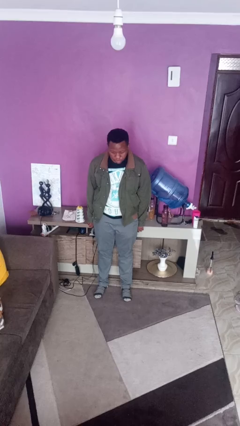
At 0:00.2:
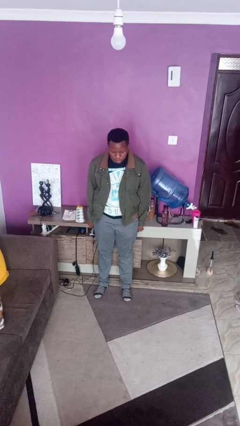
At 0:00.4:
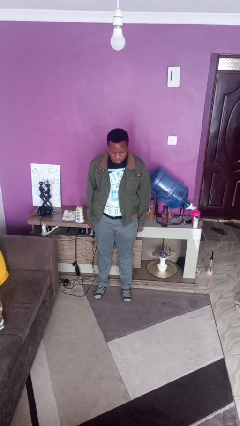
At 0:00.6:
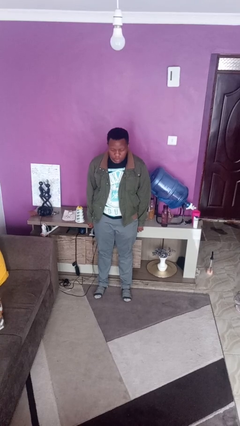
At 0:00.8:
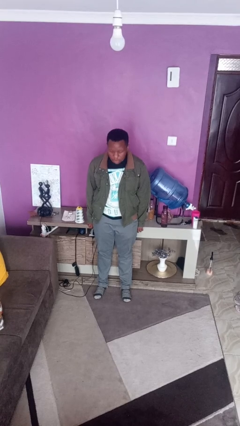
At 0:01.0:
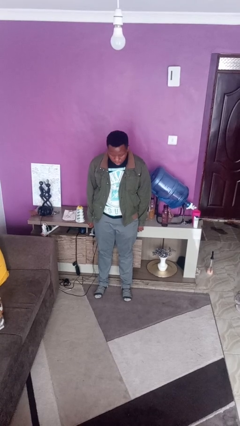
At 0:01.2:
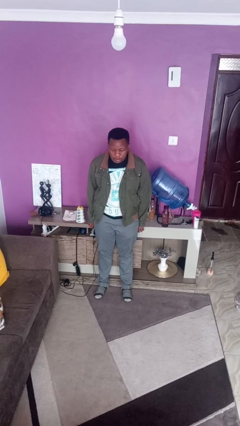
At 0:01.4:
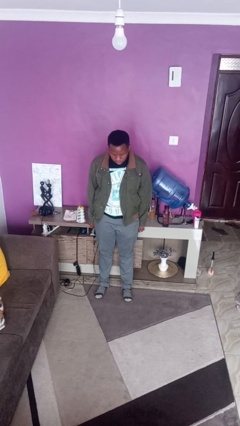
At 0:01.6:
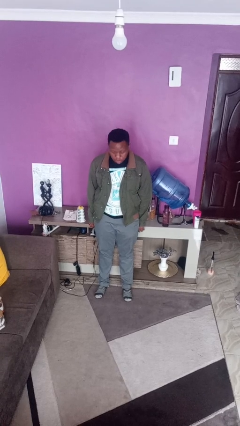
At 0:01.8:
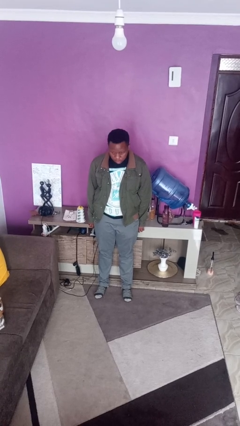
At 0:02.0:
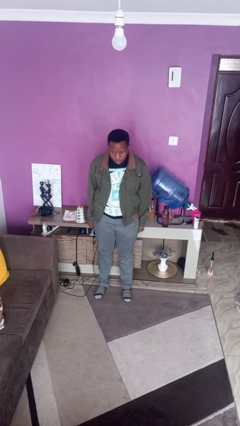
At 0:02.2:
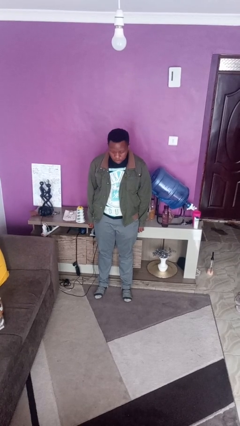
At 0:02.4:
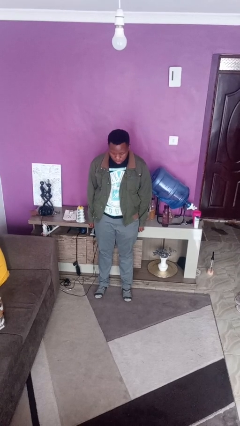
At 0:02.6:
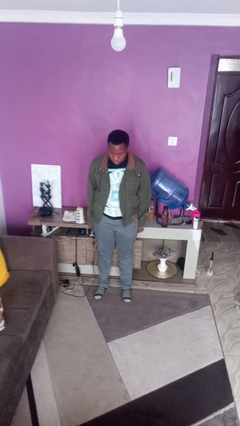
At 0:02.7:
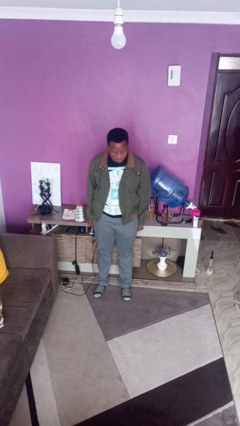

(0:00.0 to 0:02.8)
person nods head

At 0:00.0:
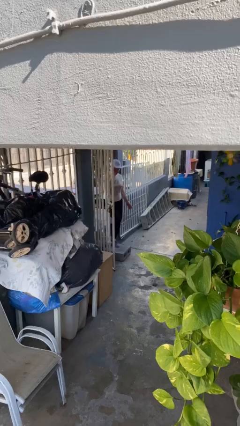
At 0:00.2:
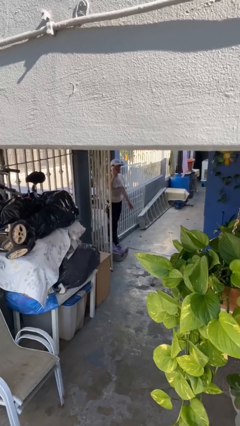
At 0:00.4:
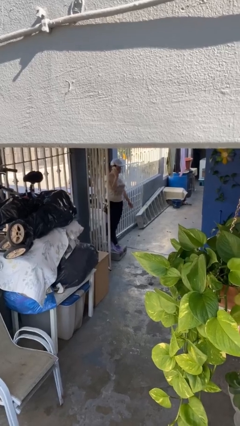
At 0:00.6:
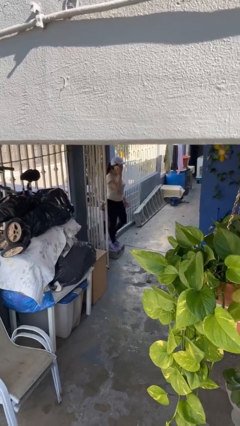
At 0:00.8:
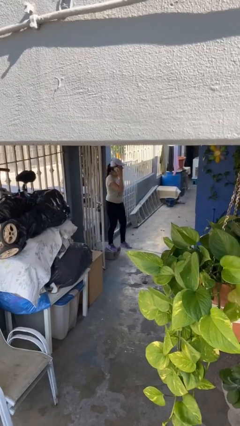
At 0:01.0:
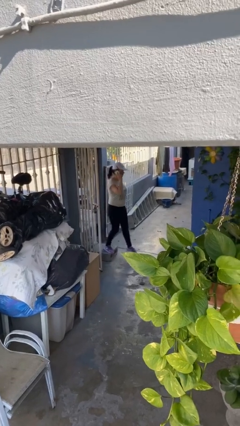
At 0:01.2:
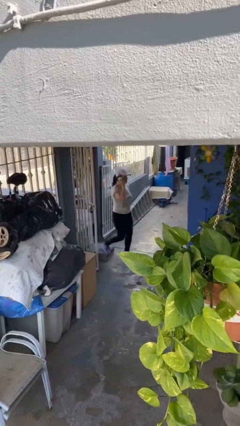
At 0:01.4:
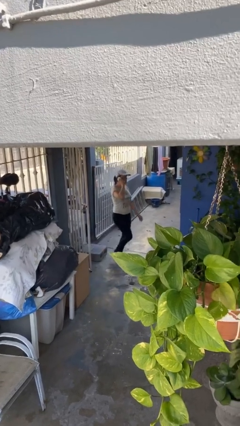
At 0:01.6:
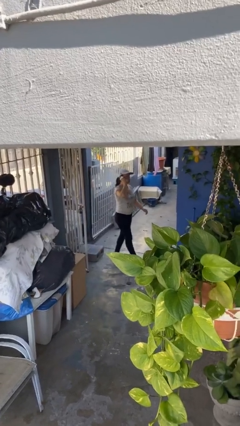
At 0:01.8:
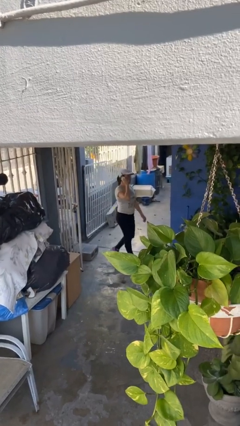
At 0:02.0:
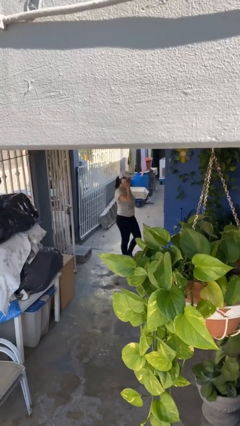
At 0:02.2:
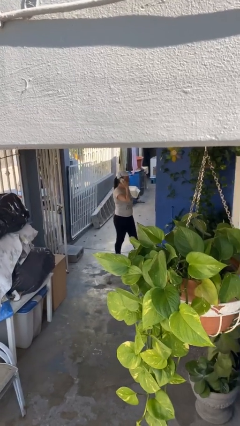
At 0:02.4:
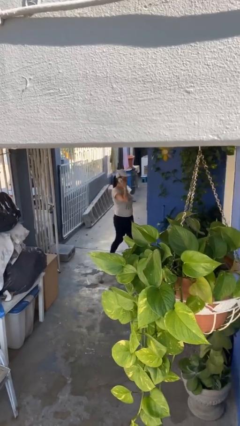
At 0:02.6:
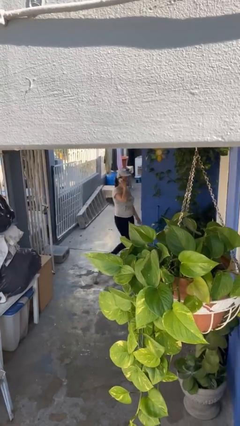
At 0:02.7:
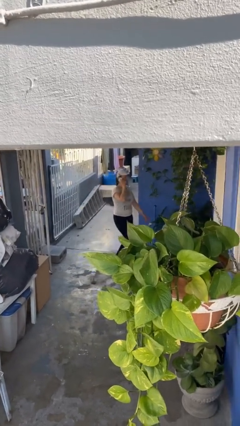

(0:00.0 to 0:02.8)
person enters scene through structure

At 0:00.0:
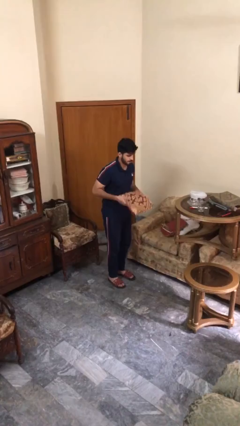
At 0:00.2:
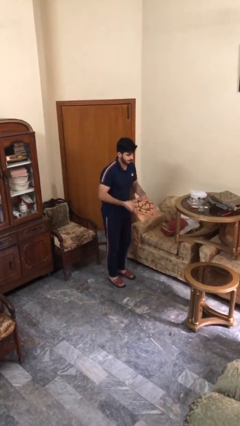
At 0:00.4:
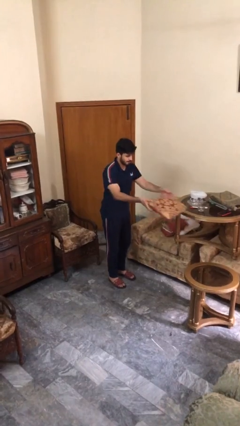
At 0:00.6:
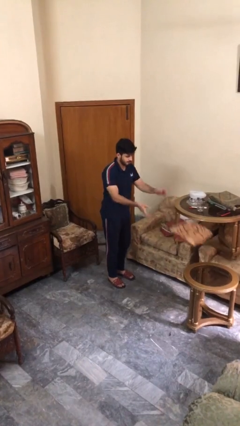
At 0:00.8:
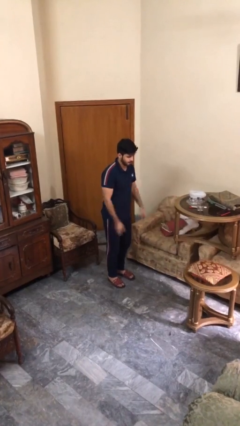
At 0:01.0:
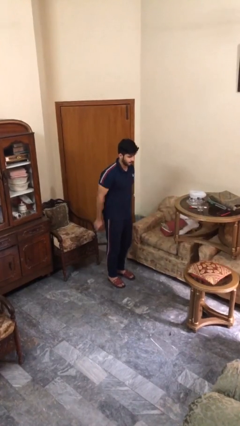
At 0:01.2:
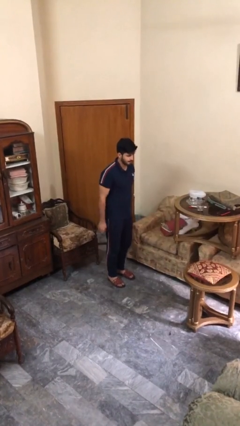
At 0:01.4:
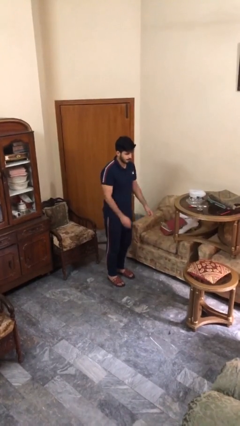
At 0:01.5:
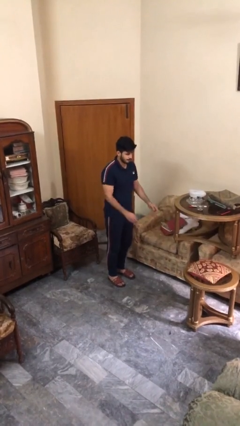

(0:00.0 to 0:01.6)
person throws object on table

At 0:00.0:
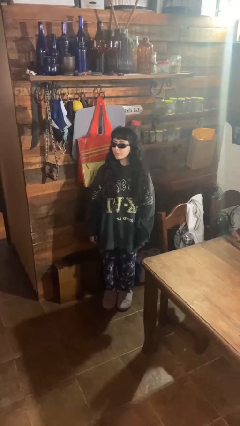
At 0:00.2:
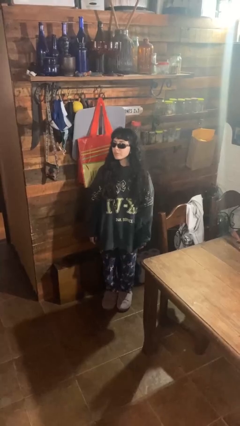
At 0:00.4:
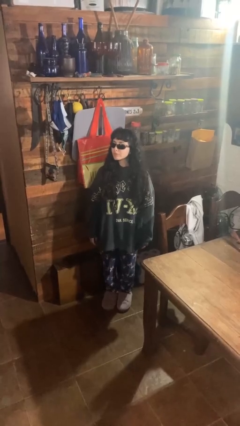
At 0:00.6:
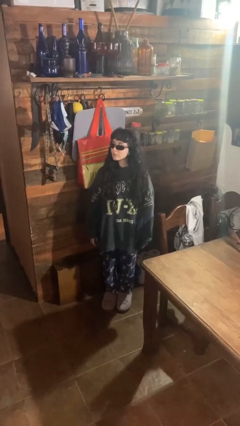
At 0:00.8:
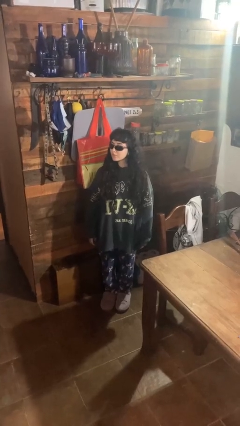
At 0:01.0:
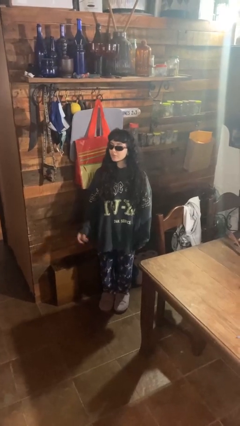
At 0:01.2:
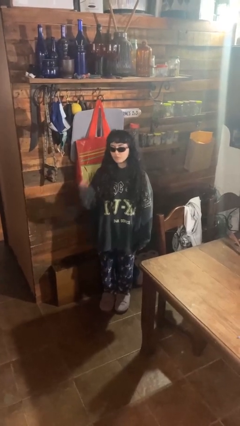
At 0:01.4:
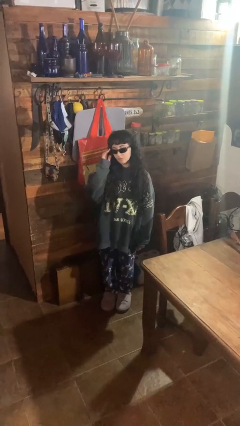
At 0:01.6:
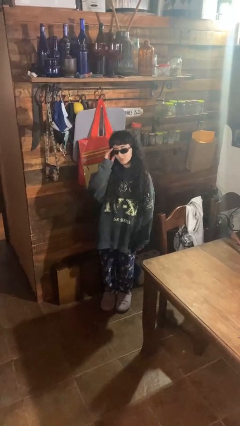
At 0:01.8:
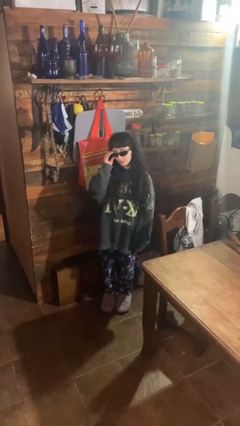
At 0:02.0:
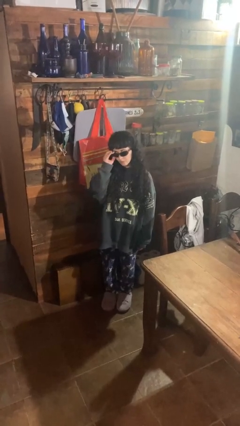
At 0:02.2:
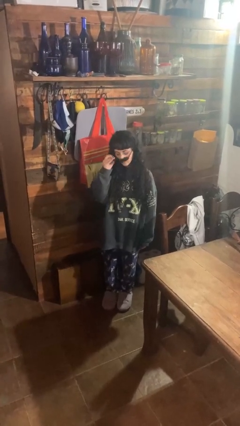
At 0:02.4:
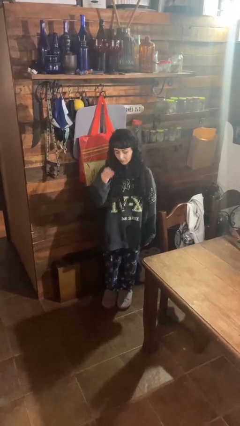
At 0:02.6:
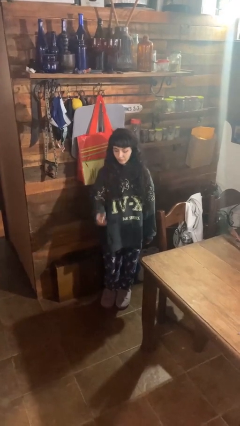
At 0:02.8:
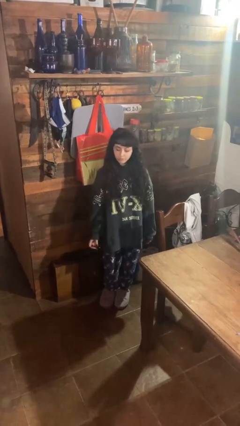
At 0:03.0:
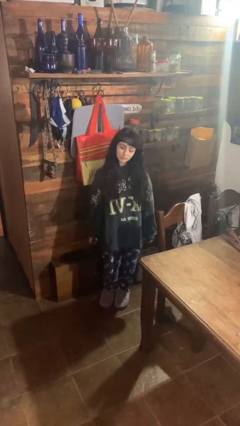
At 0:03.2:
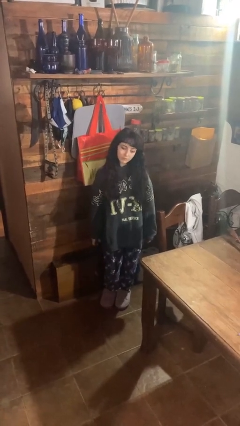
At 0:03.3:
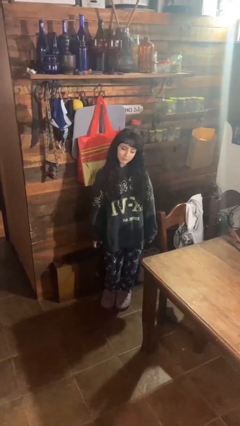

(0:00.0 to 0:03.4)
person takes off sunglasses

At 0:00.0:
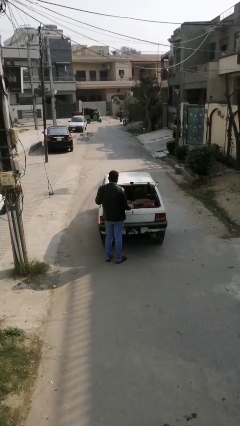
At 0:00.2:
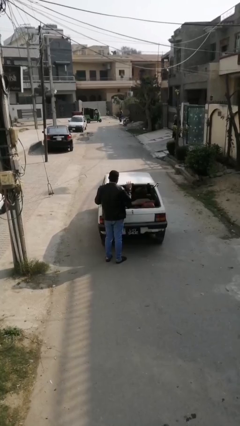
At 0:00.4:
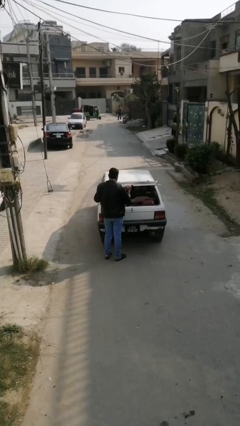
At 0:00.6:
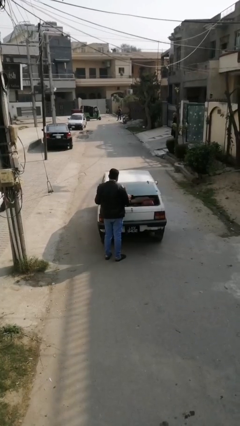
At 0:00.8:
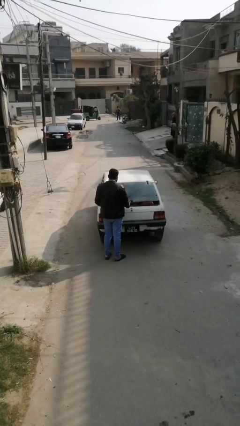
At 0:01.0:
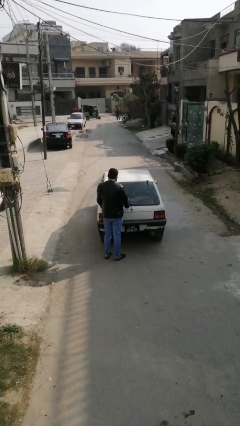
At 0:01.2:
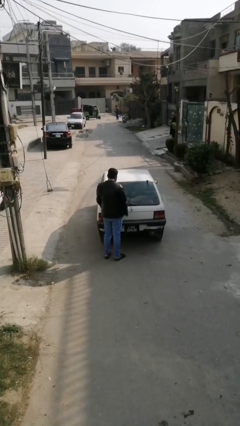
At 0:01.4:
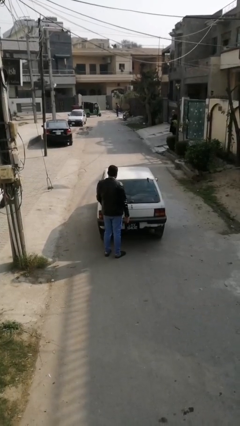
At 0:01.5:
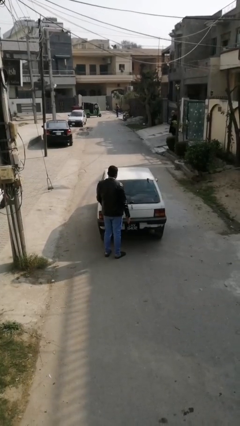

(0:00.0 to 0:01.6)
person closes car trunk

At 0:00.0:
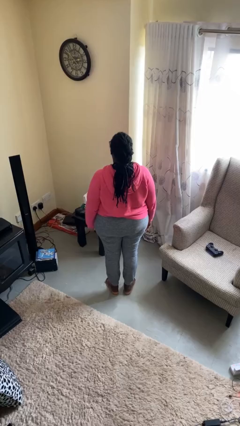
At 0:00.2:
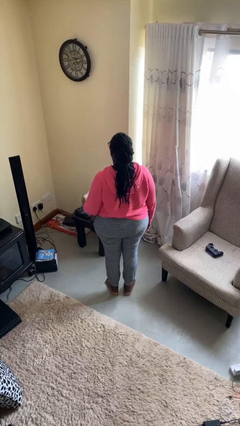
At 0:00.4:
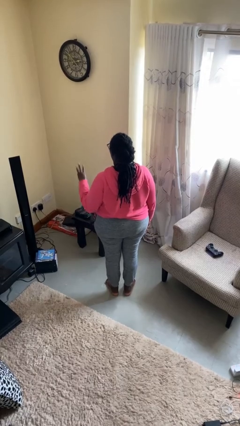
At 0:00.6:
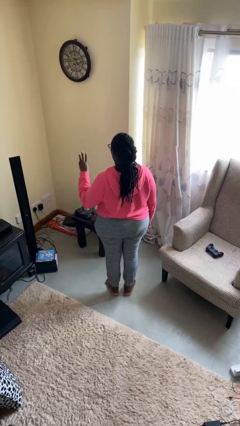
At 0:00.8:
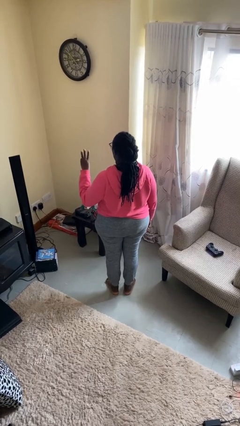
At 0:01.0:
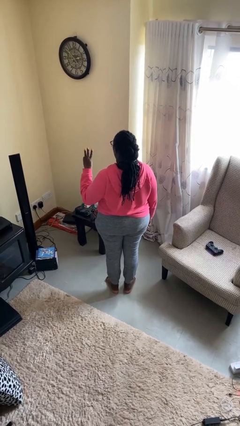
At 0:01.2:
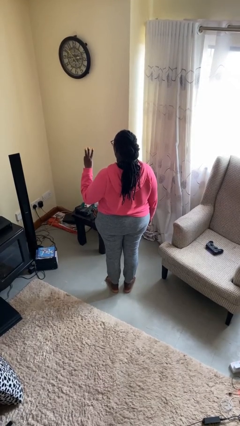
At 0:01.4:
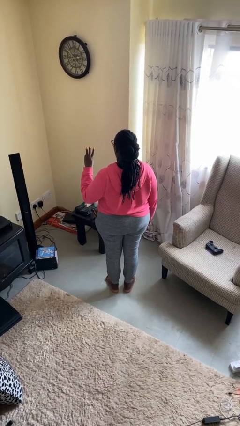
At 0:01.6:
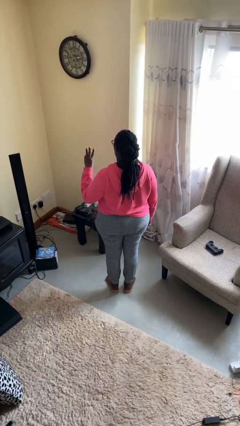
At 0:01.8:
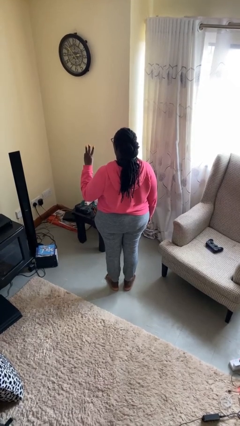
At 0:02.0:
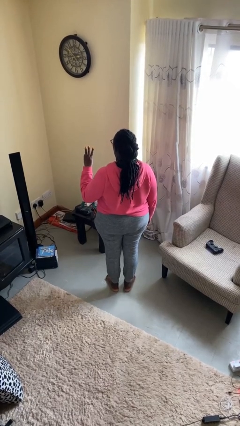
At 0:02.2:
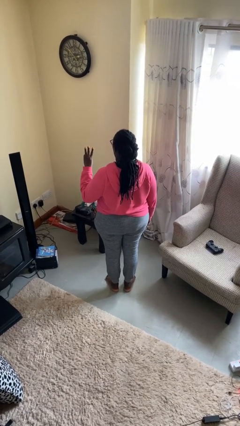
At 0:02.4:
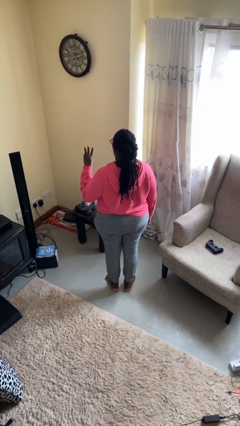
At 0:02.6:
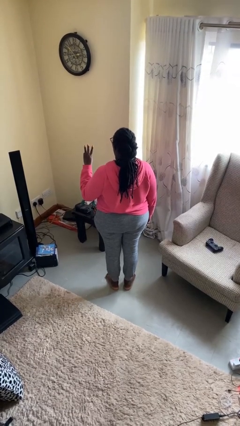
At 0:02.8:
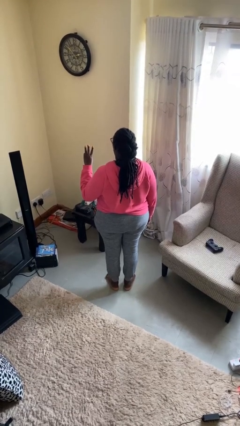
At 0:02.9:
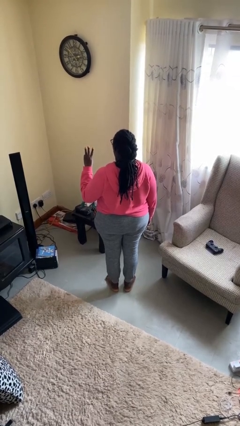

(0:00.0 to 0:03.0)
person gestures number three

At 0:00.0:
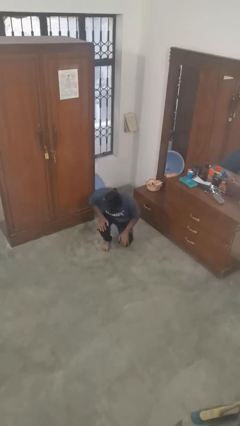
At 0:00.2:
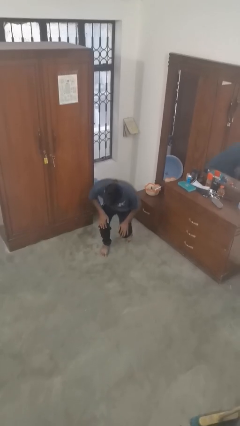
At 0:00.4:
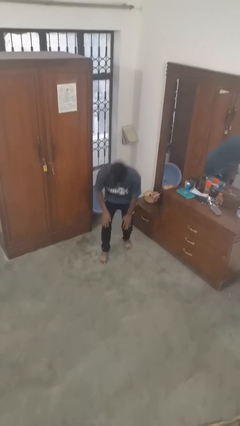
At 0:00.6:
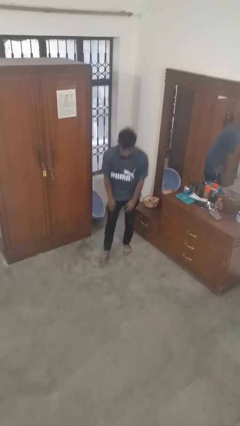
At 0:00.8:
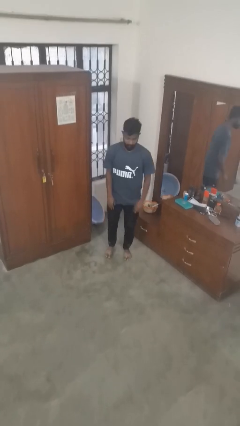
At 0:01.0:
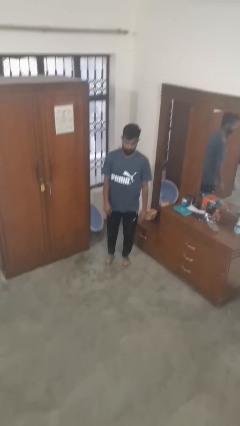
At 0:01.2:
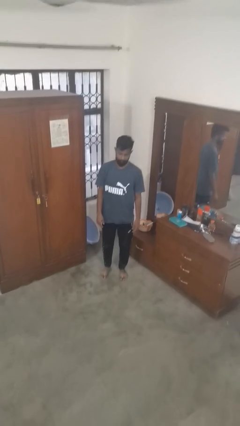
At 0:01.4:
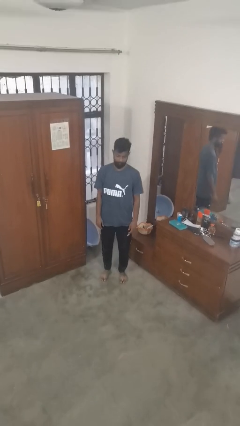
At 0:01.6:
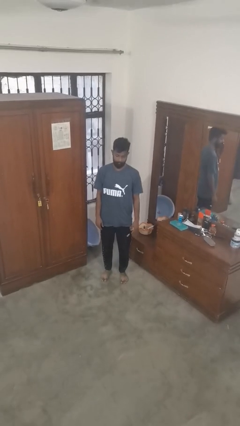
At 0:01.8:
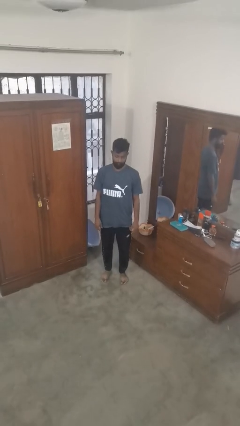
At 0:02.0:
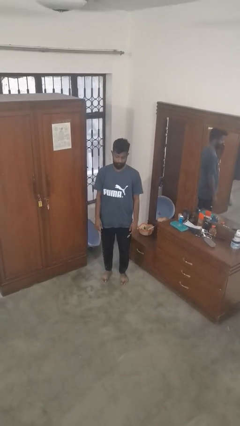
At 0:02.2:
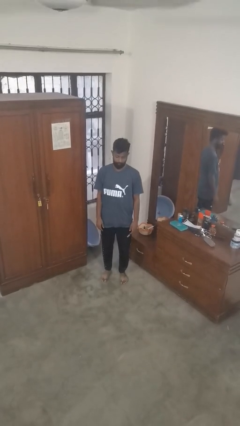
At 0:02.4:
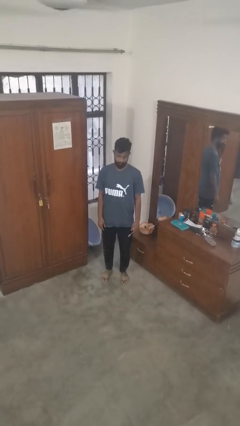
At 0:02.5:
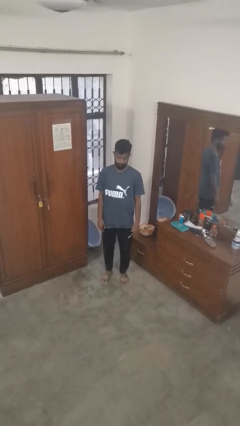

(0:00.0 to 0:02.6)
person stands up from floor
